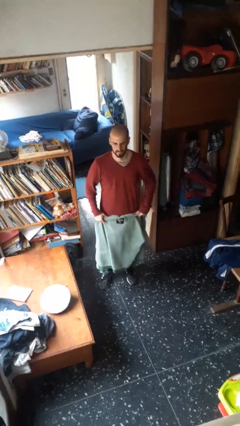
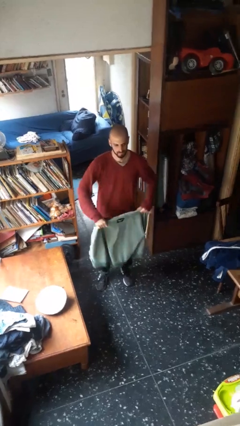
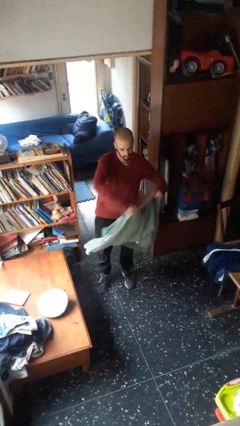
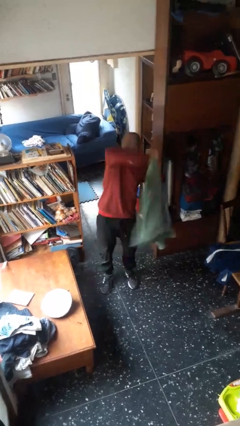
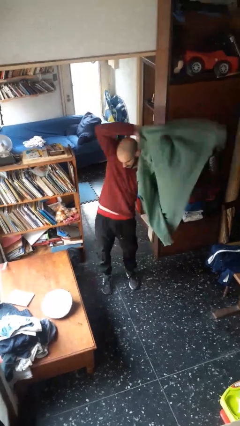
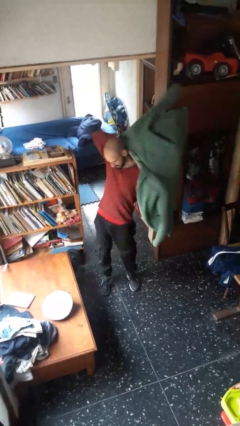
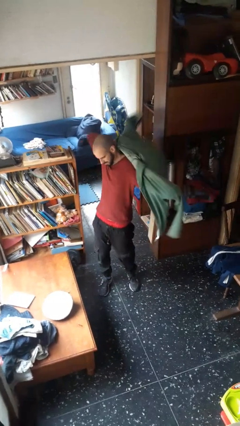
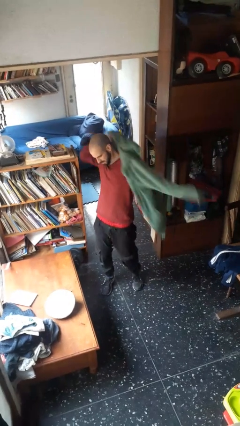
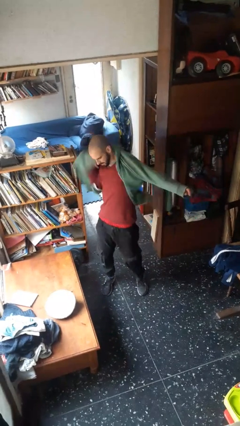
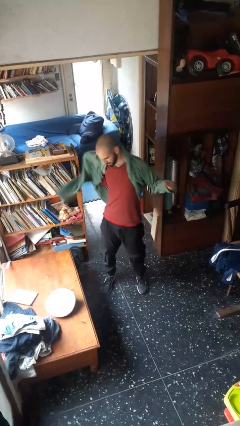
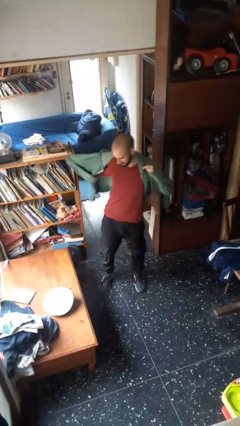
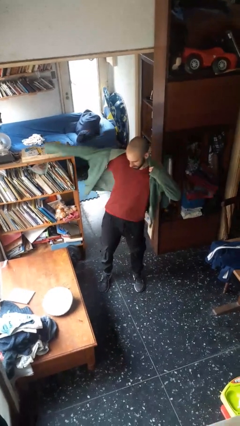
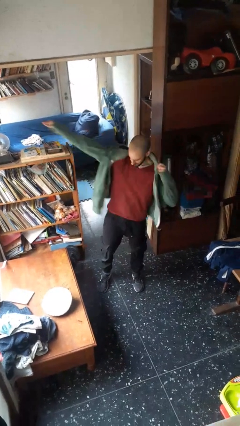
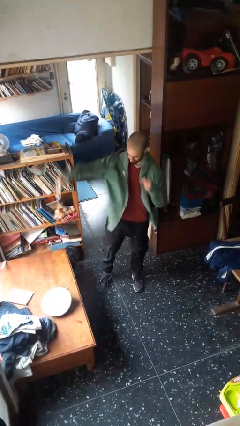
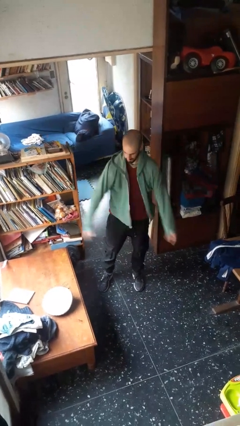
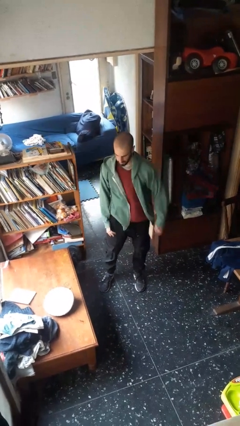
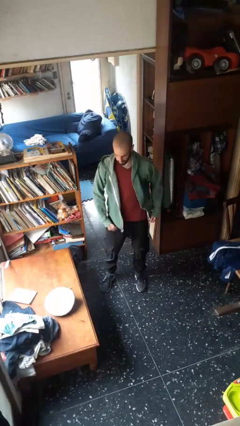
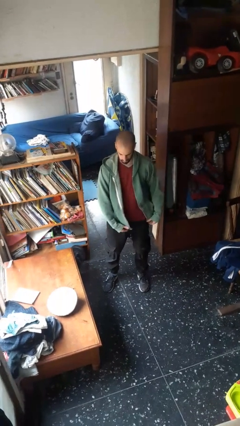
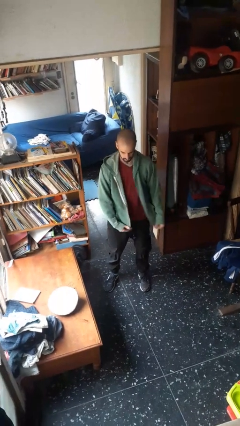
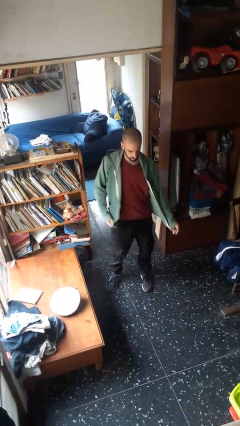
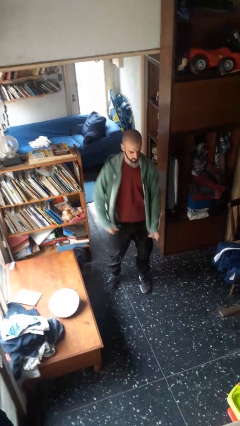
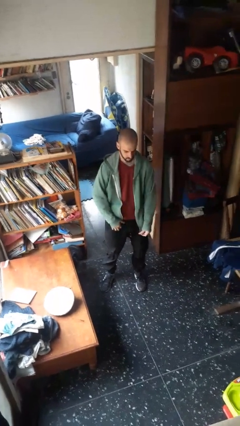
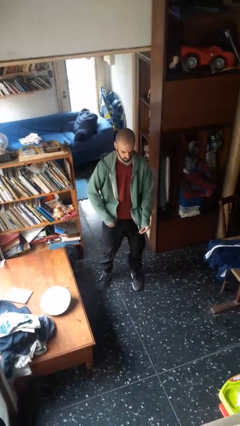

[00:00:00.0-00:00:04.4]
person puts on jacket

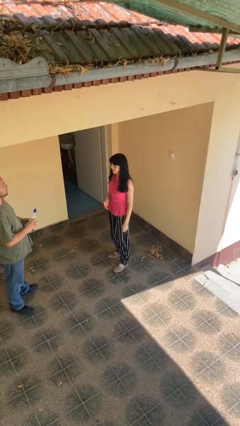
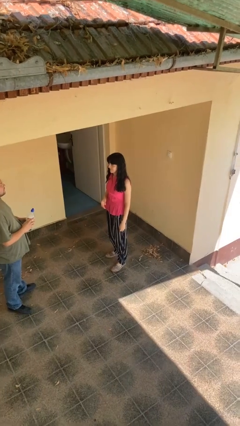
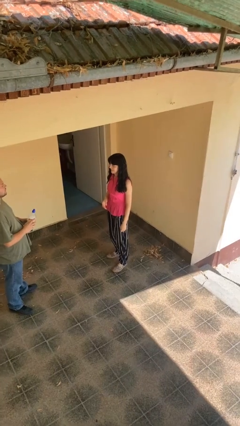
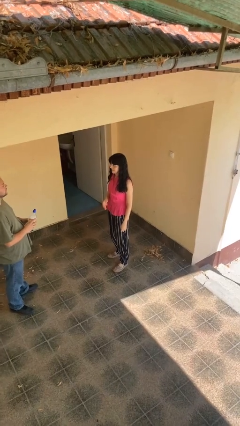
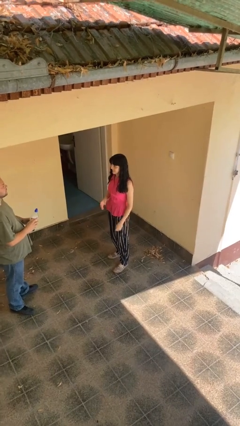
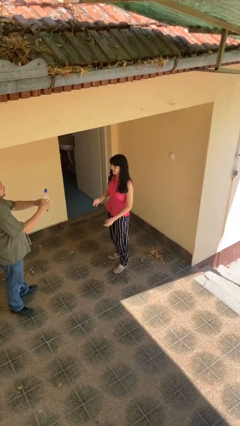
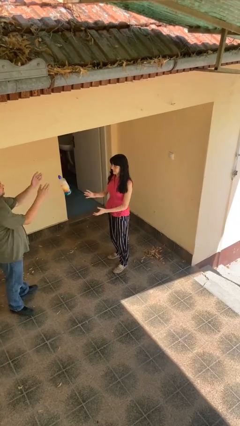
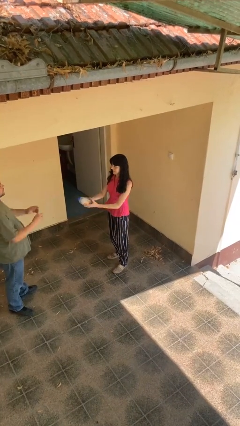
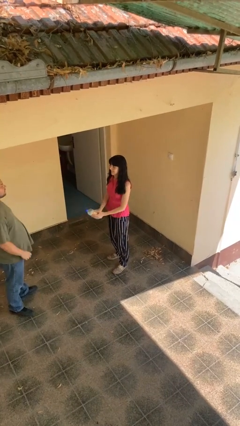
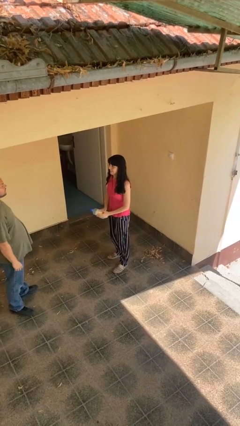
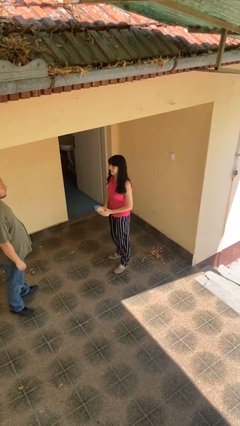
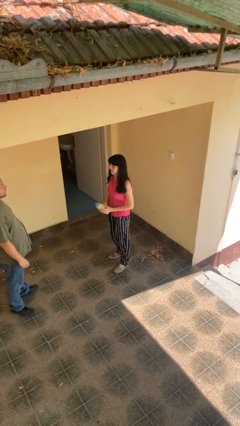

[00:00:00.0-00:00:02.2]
person catches object from person

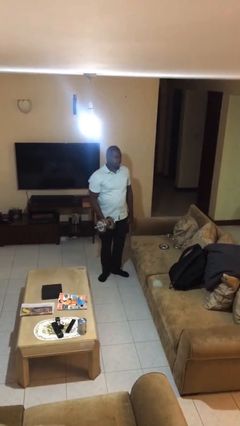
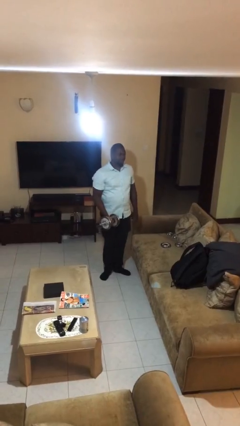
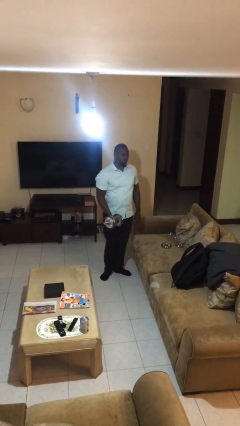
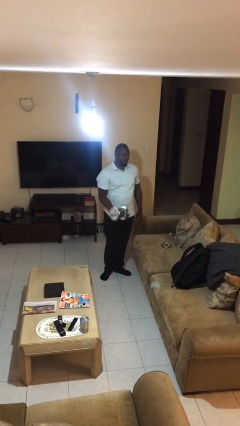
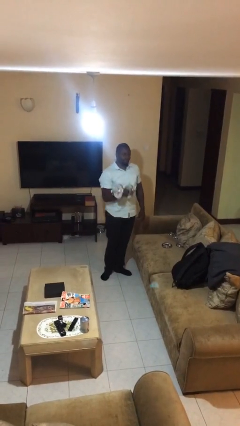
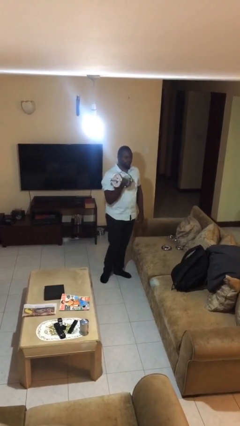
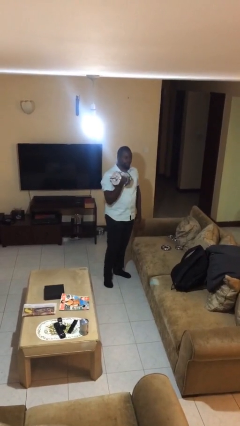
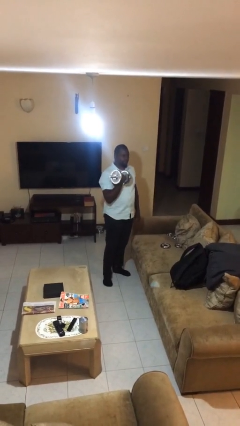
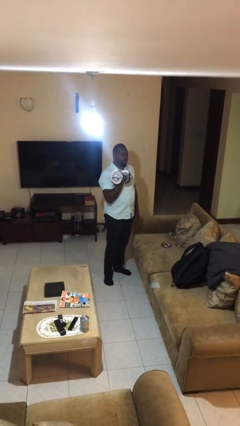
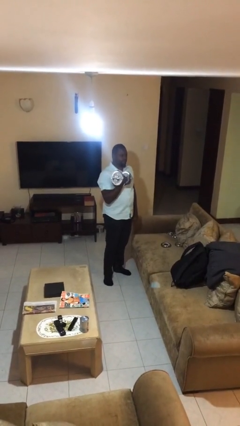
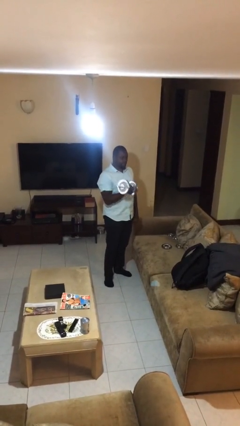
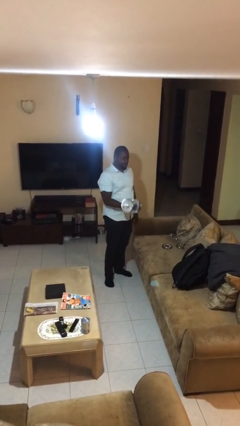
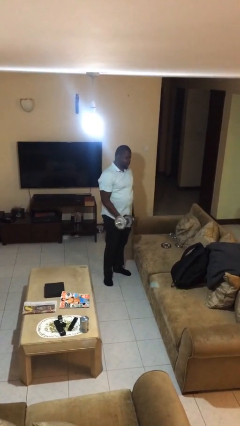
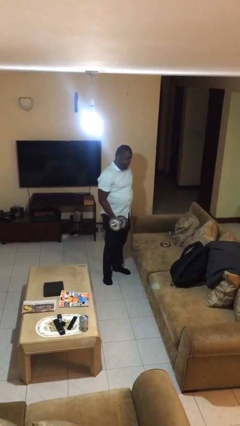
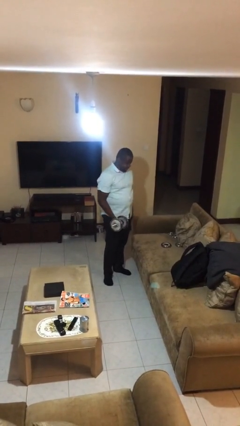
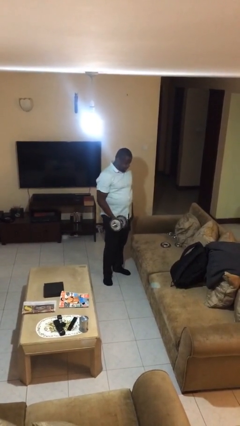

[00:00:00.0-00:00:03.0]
person lifts dumbbells

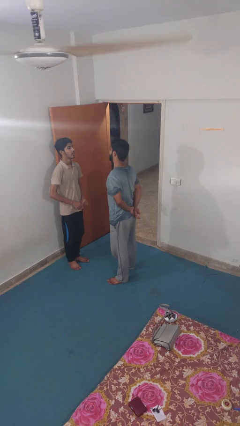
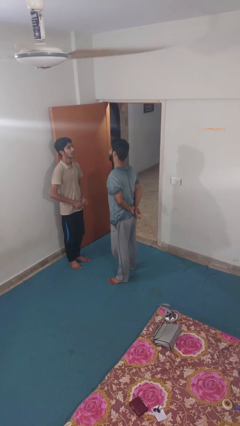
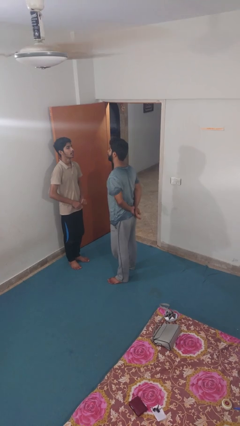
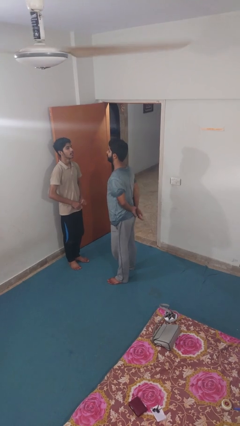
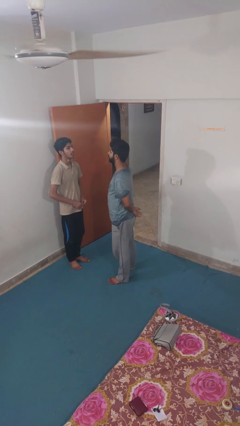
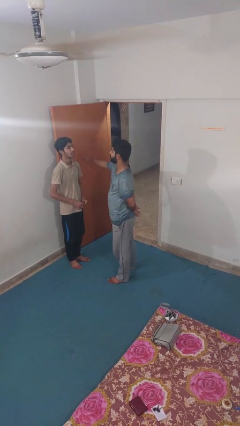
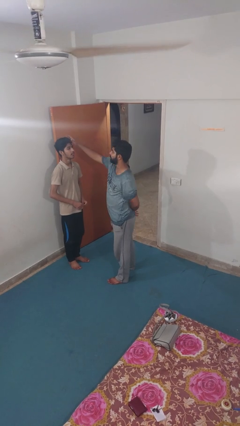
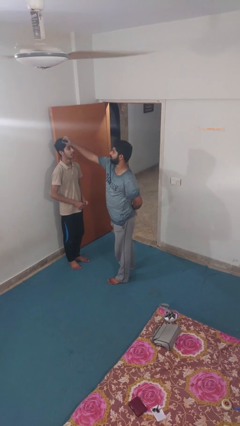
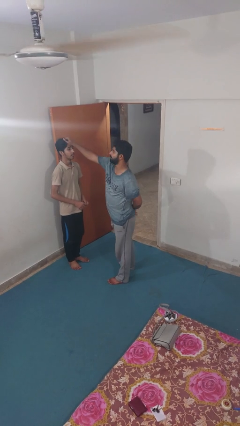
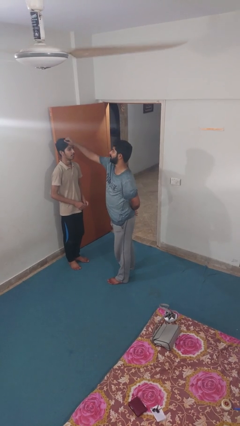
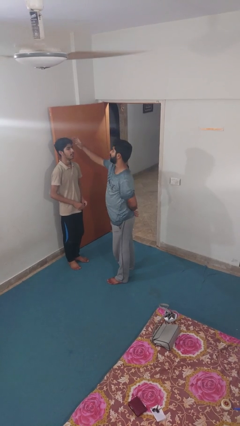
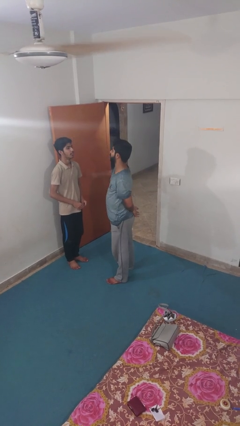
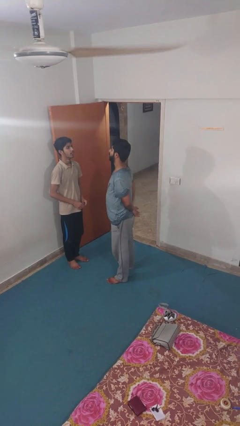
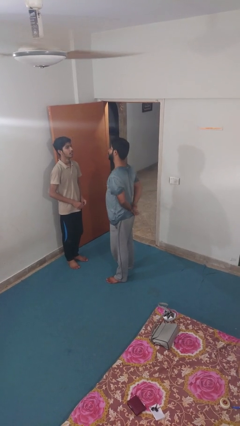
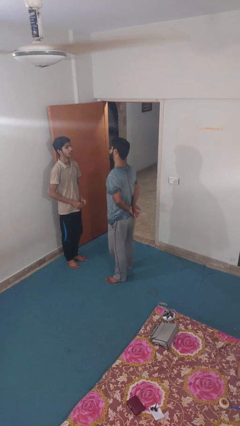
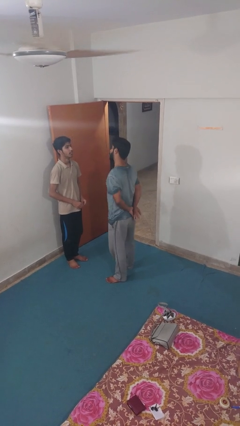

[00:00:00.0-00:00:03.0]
person grabs person by hair

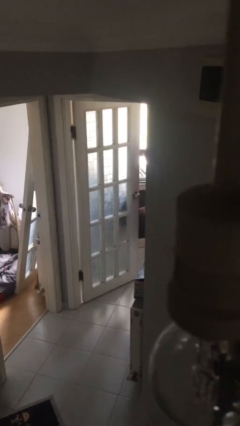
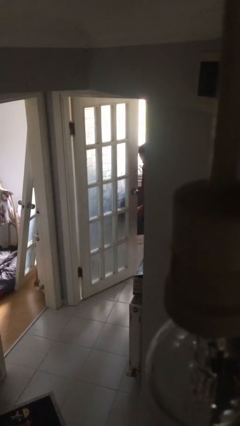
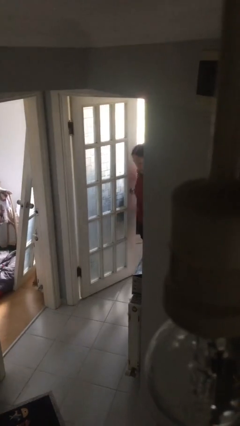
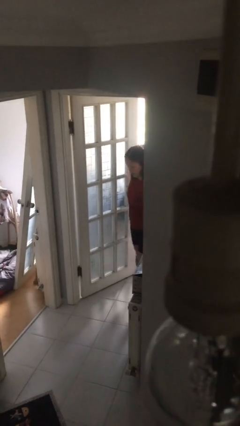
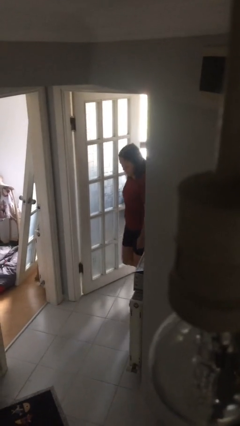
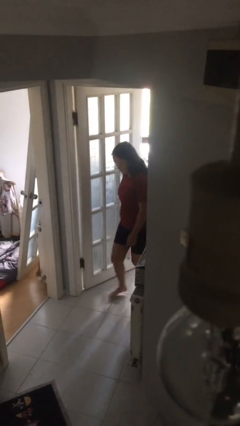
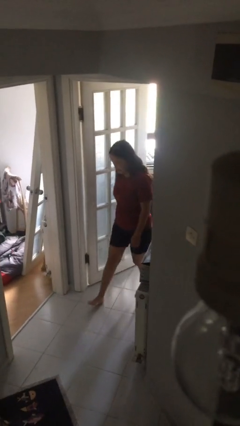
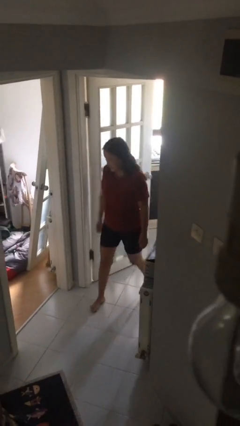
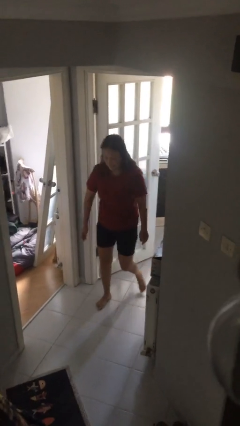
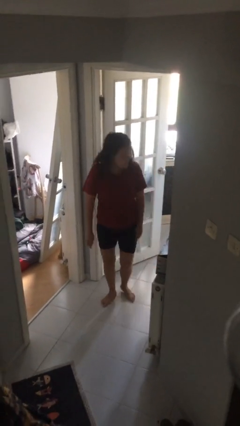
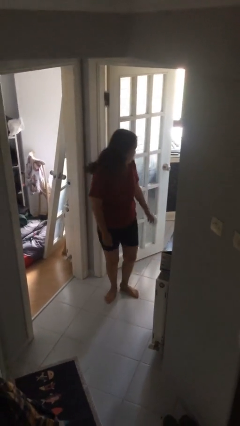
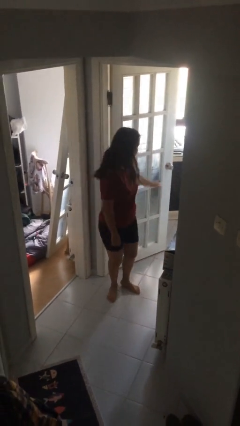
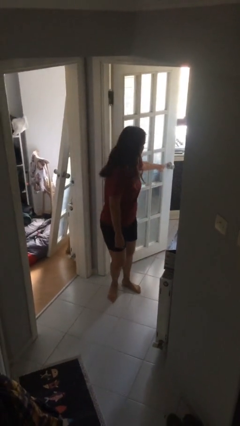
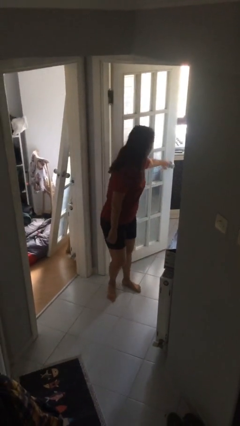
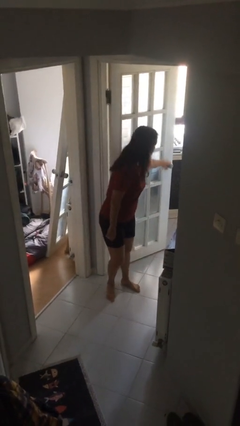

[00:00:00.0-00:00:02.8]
person enters scene through structure

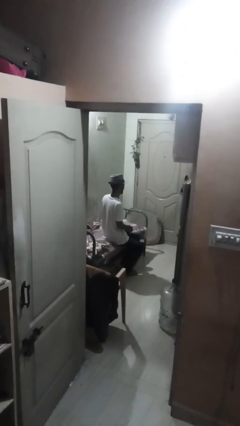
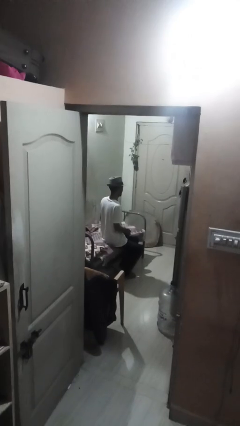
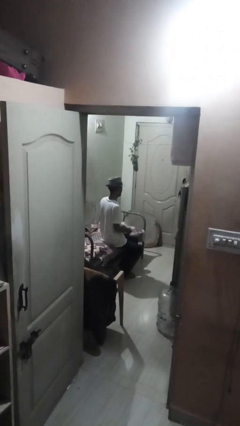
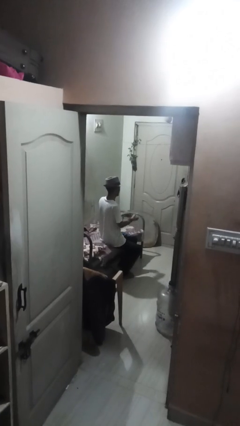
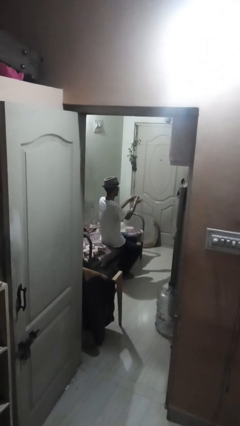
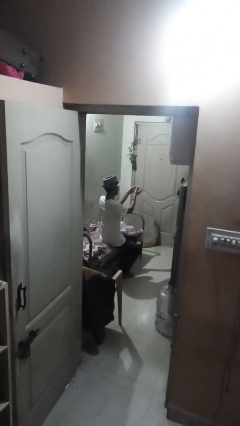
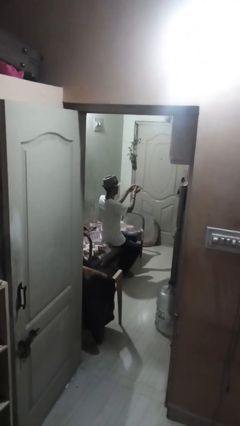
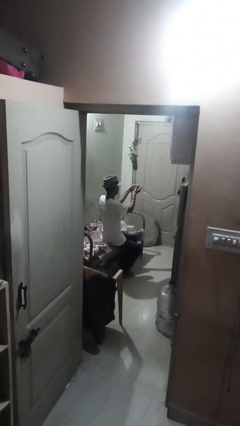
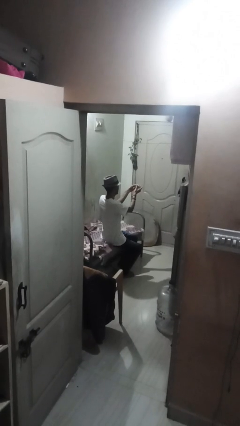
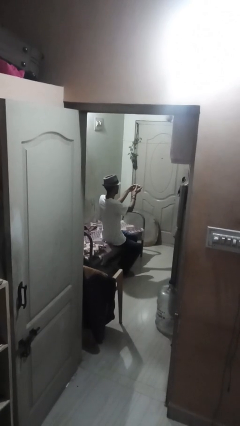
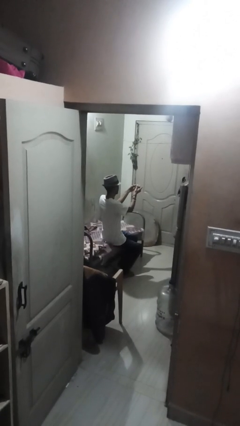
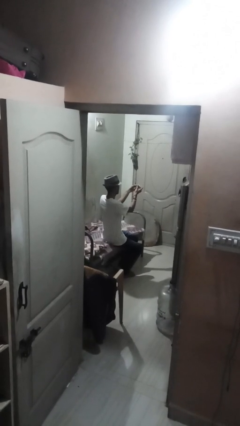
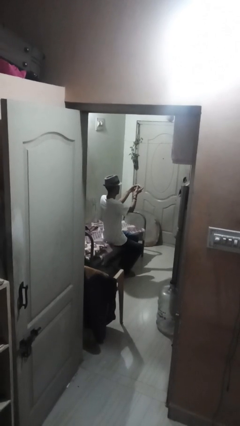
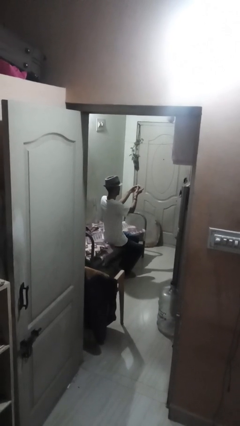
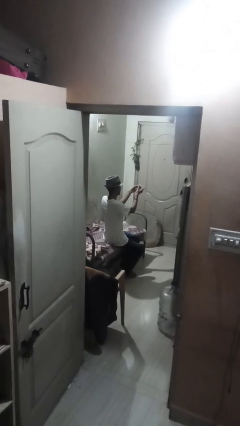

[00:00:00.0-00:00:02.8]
person clips fingernails
